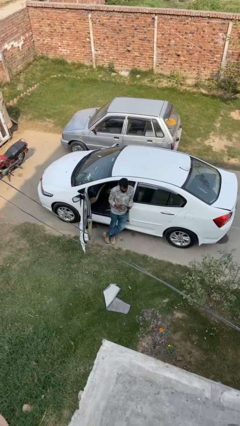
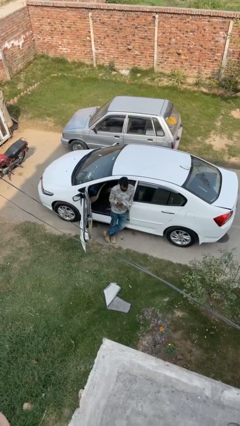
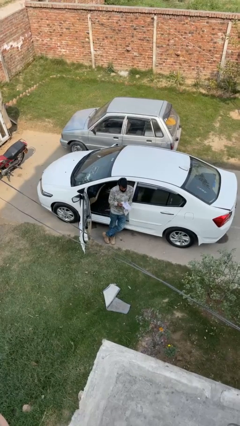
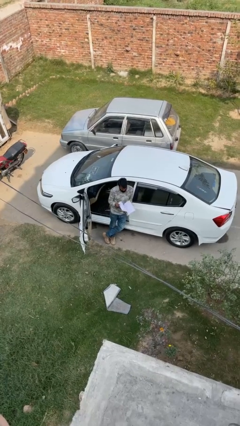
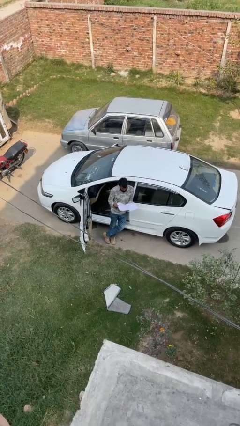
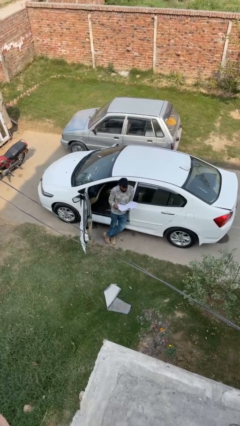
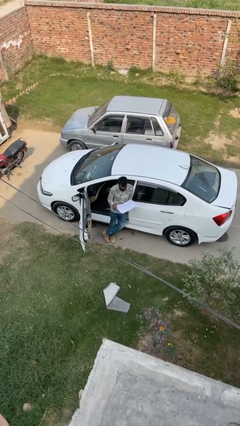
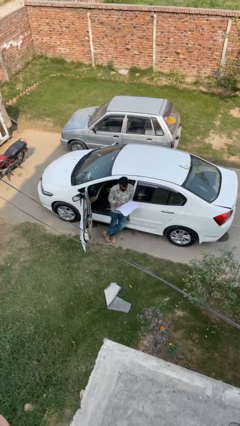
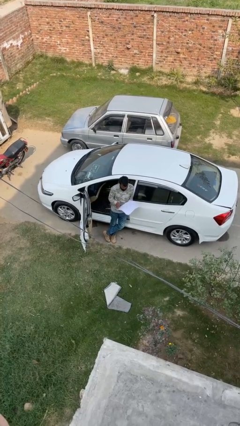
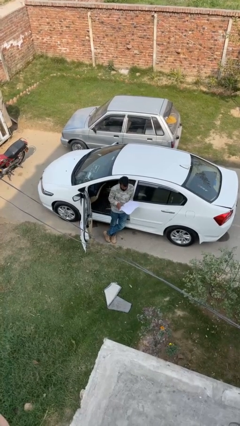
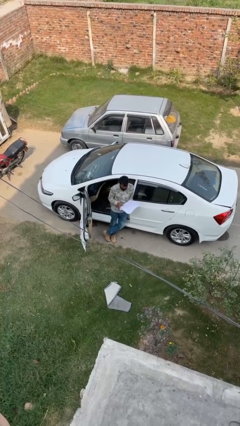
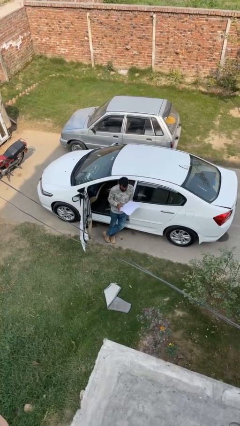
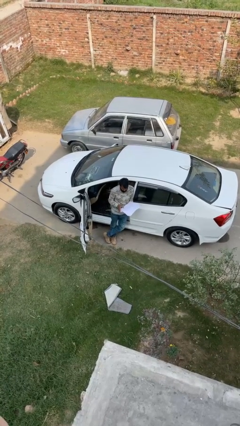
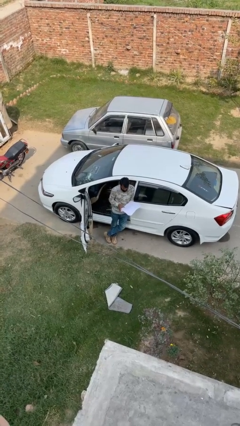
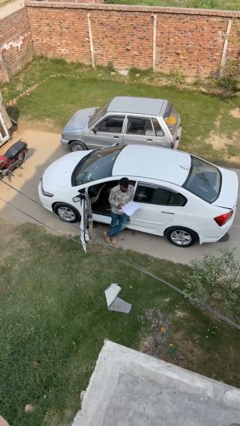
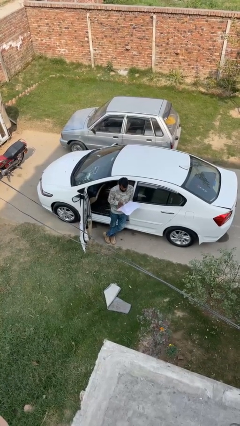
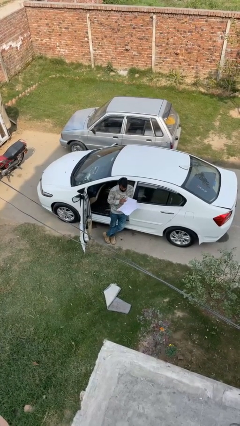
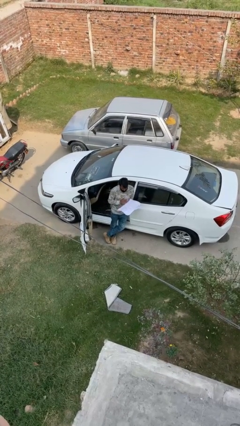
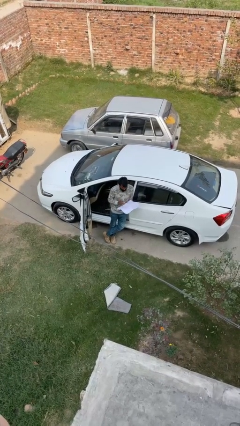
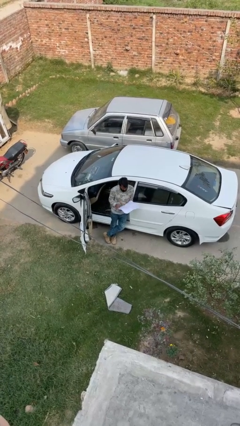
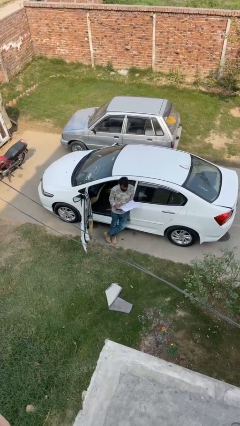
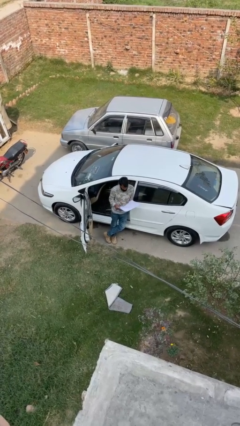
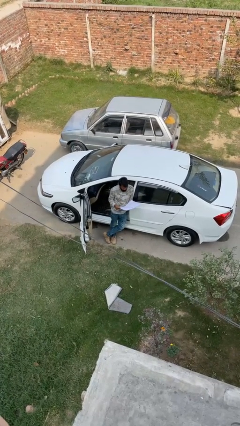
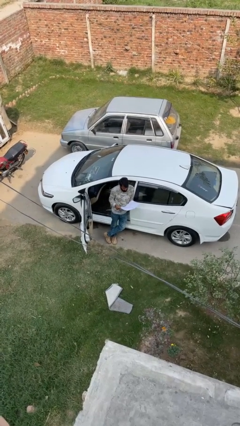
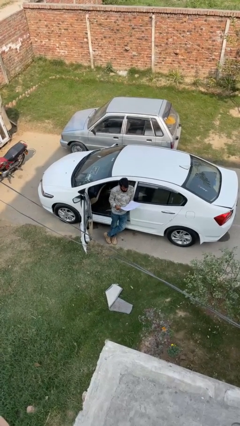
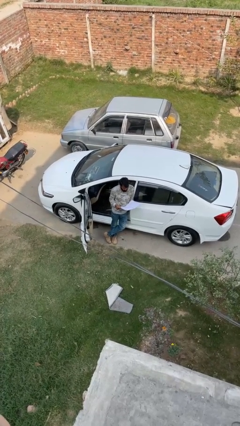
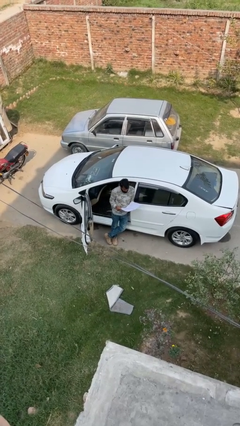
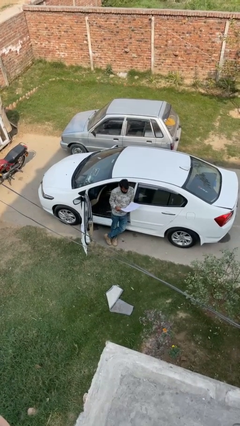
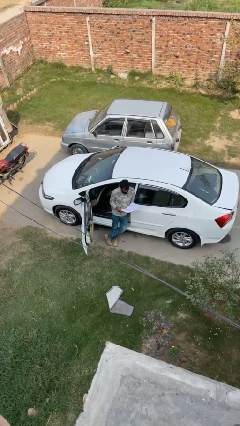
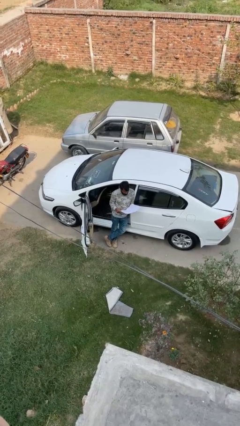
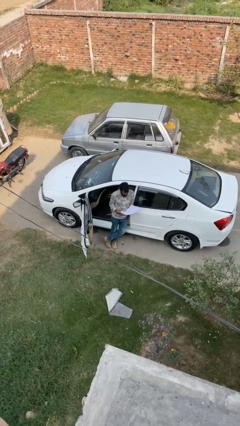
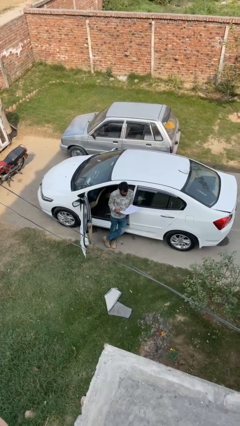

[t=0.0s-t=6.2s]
person reads document

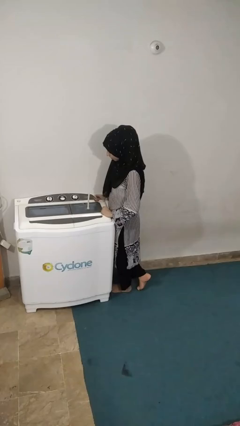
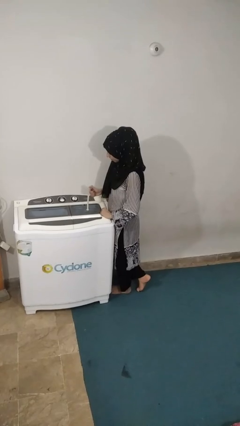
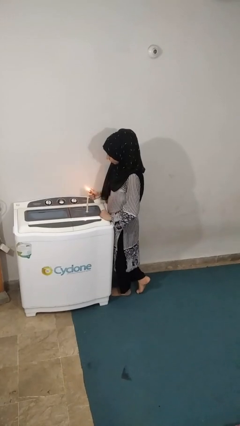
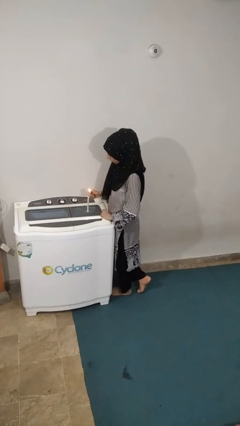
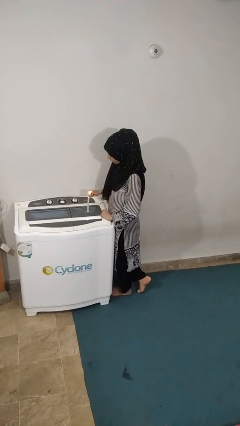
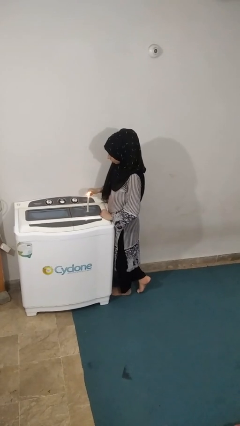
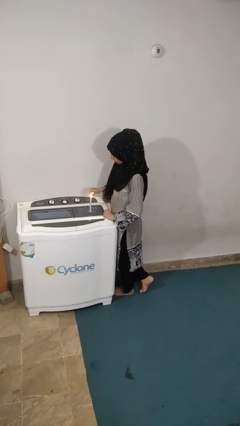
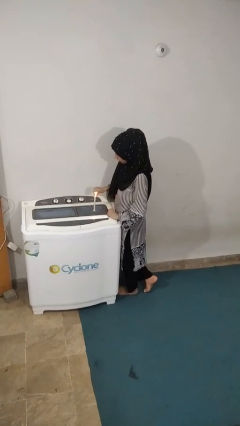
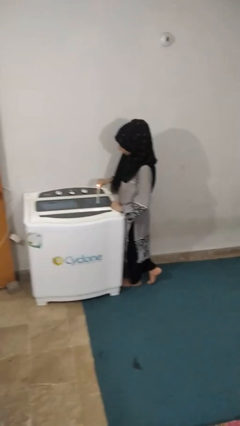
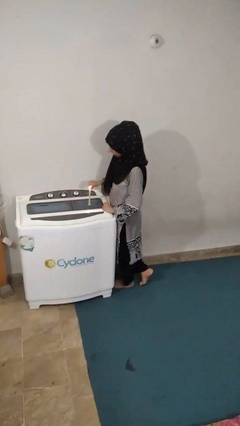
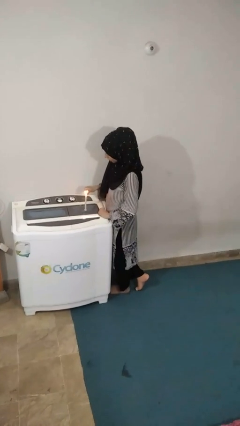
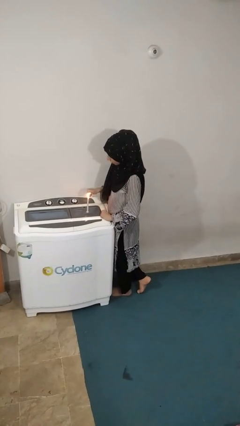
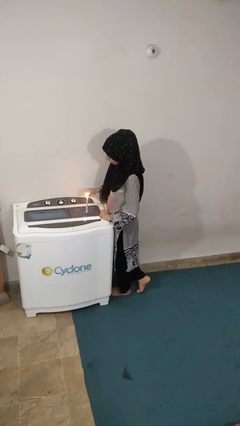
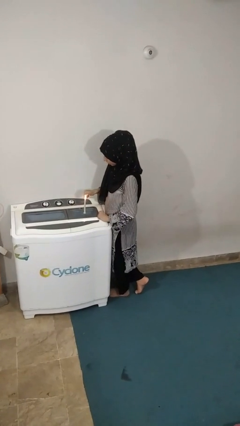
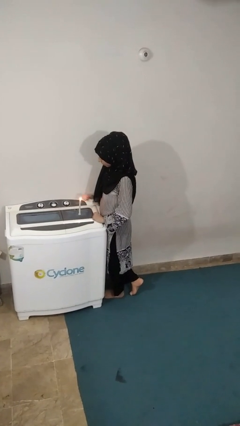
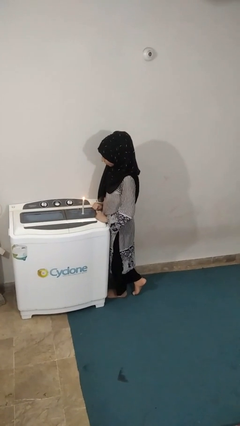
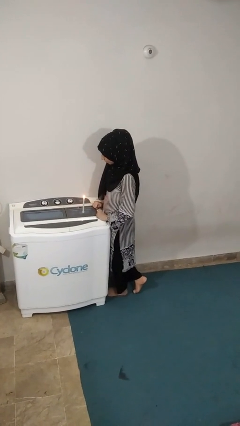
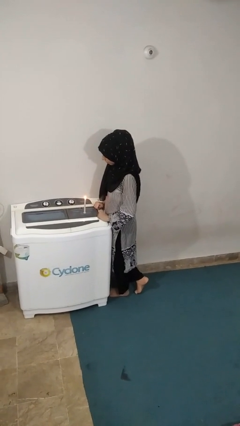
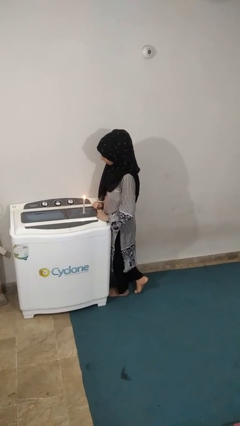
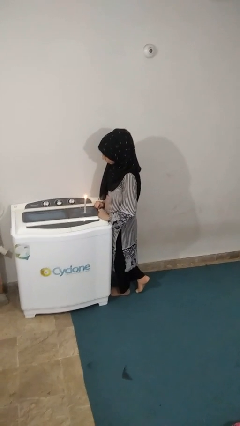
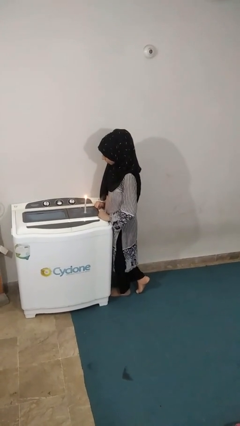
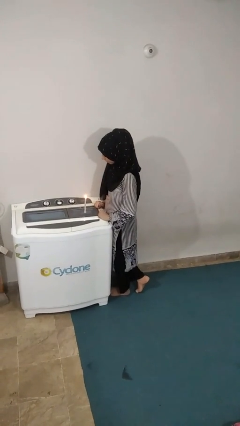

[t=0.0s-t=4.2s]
person lights candle

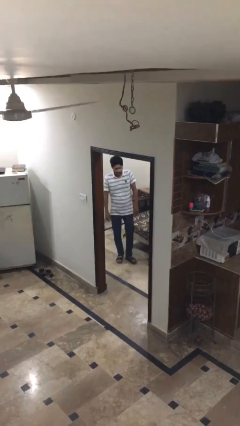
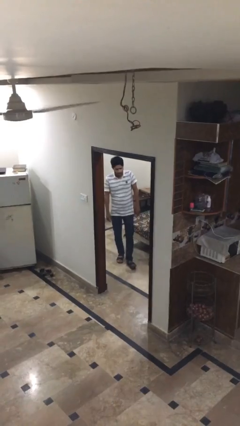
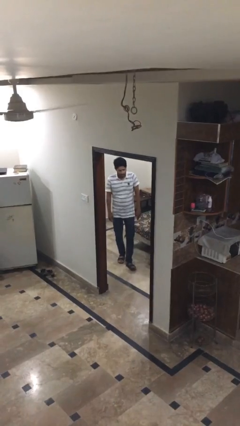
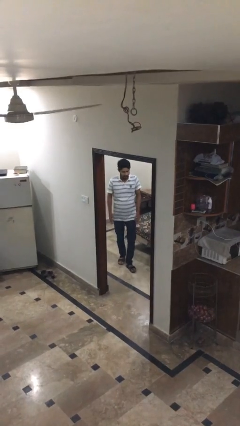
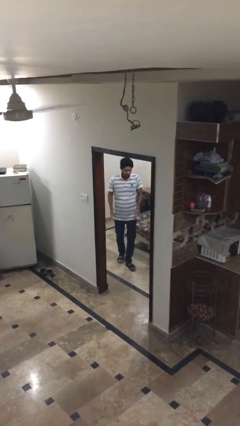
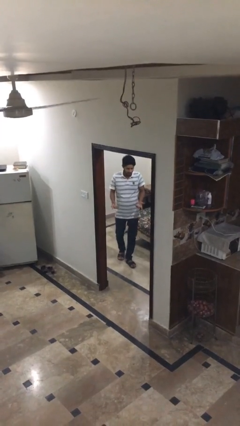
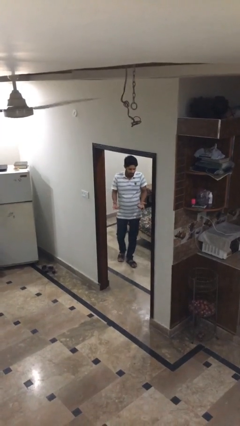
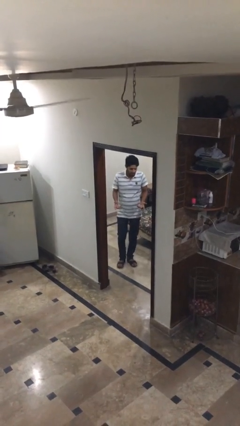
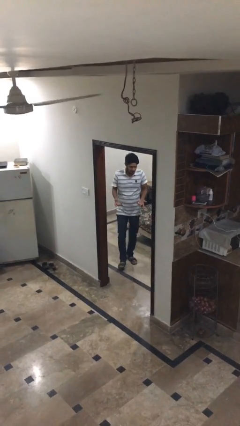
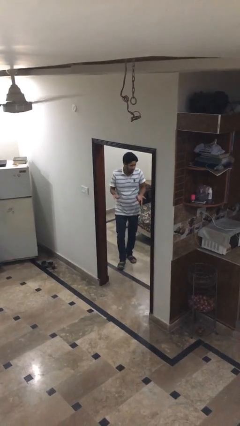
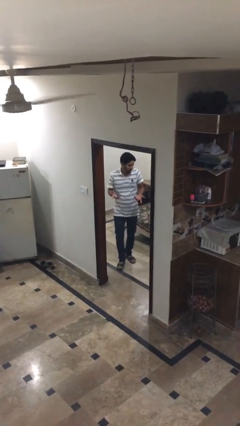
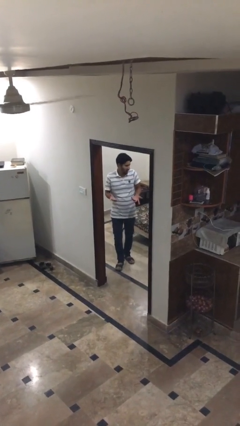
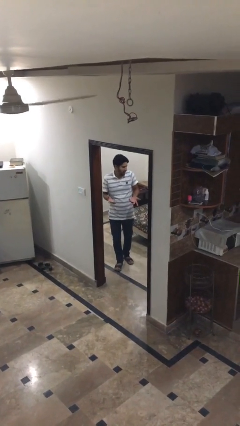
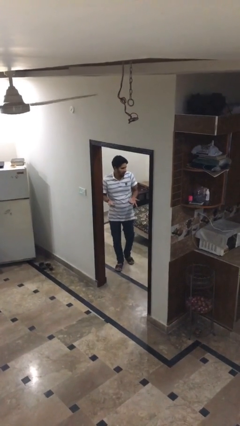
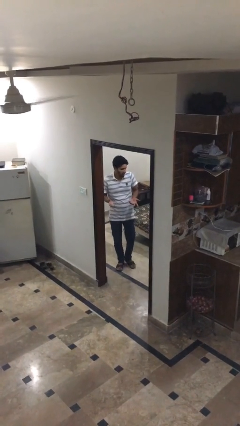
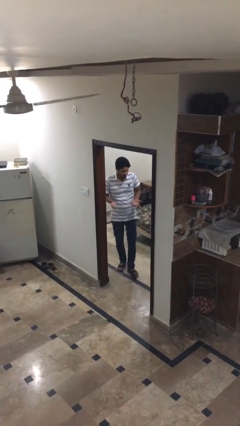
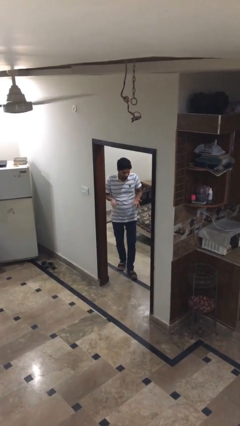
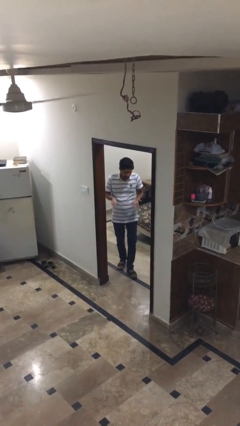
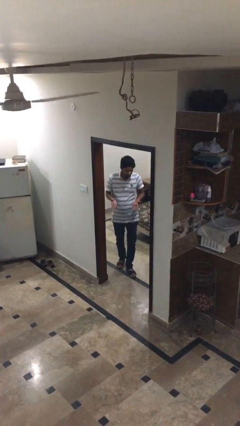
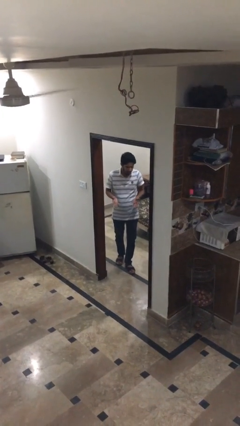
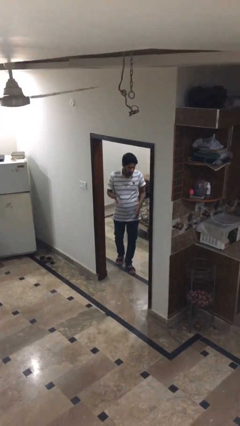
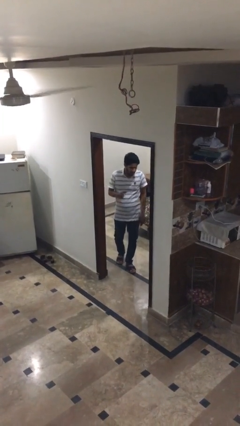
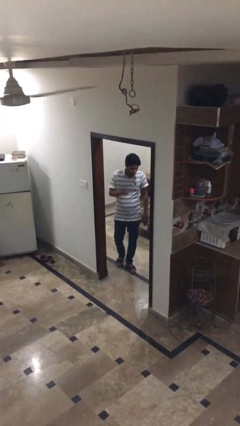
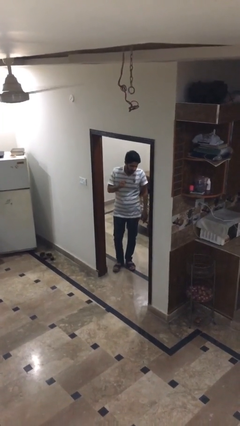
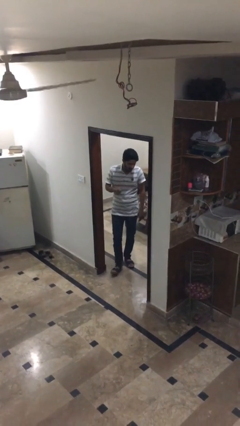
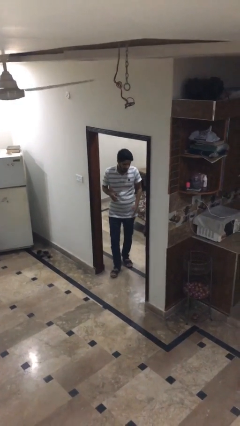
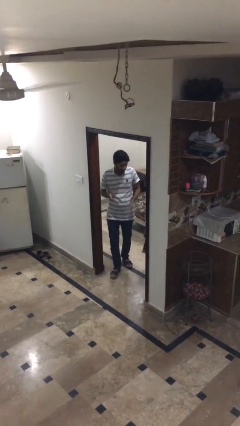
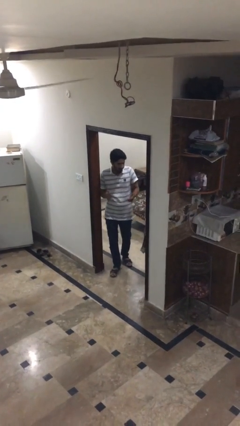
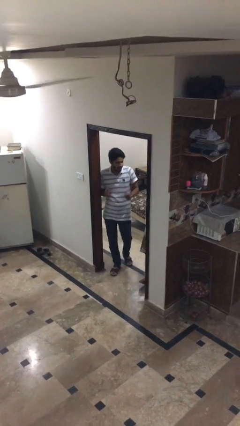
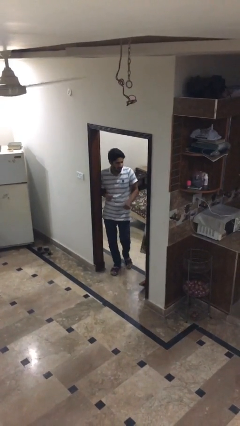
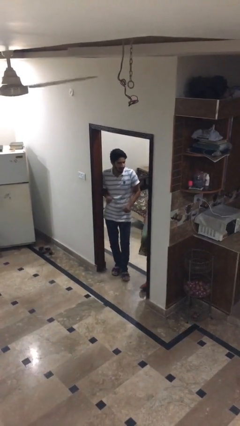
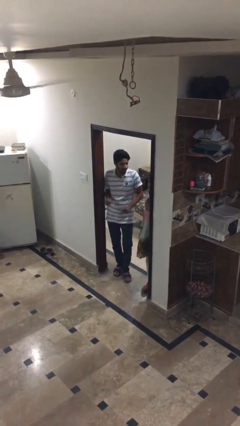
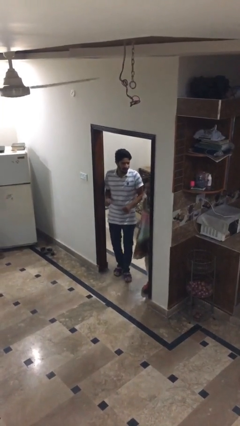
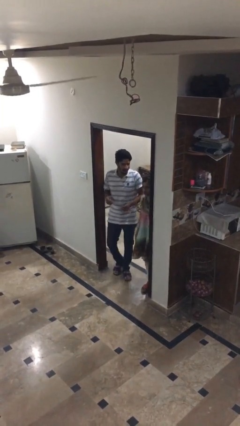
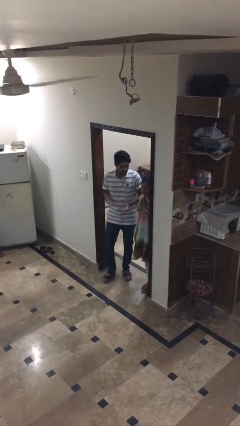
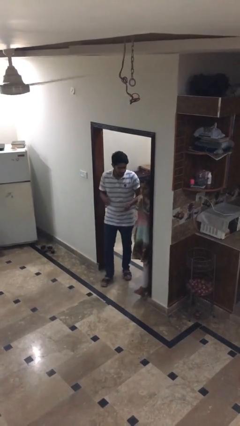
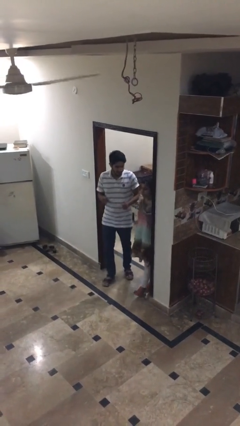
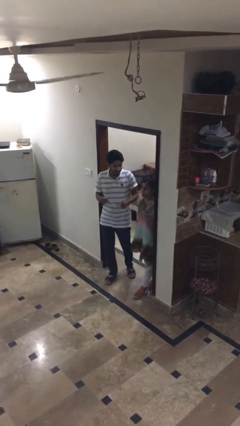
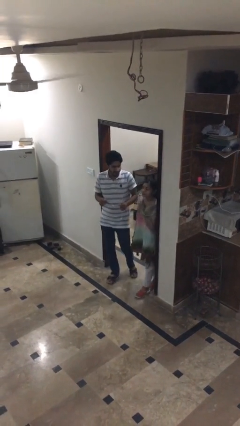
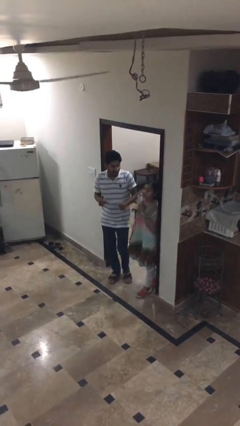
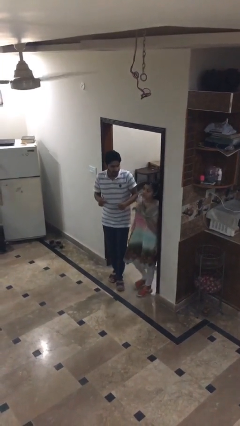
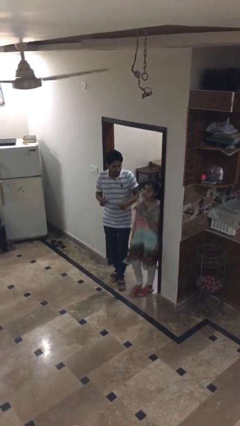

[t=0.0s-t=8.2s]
person talks to person
